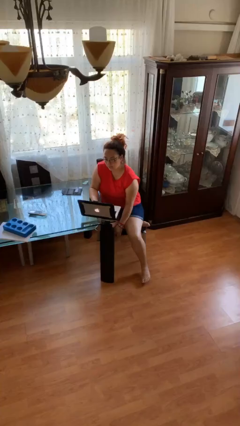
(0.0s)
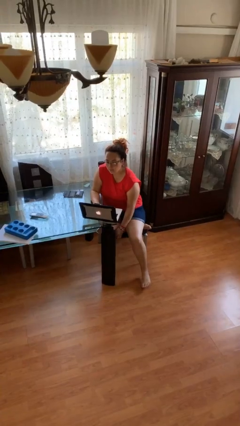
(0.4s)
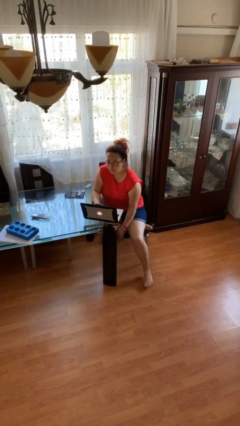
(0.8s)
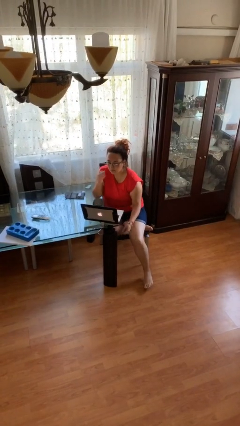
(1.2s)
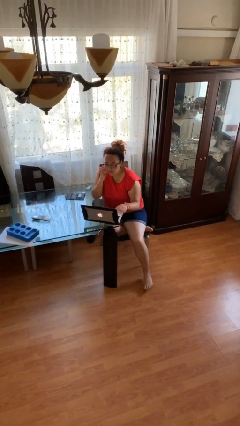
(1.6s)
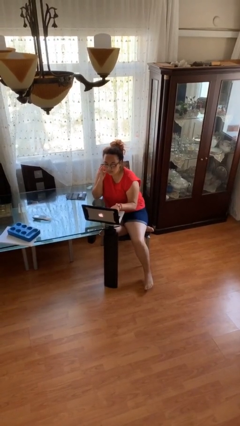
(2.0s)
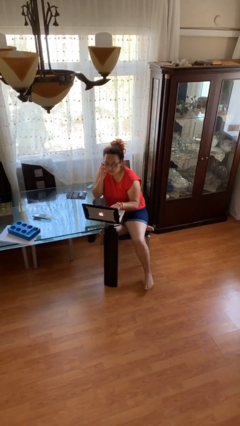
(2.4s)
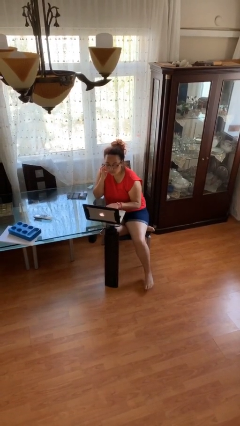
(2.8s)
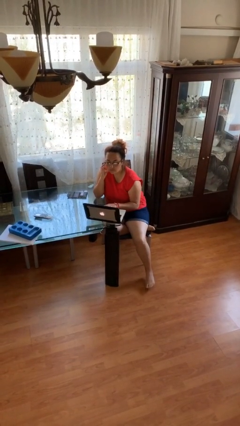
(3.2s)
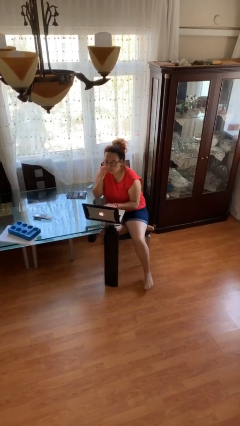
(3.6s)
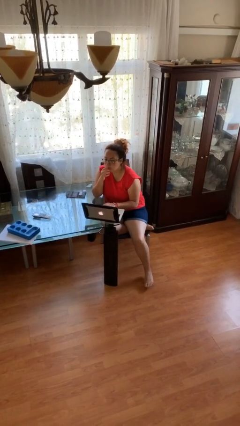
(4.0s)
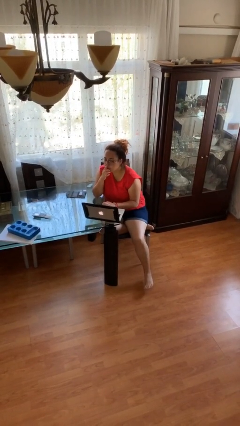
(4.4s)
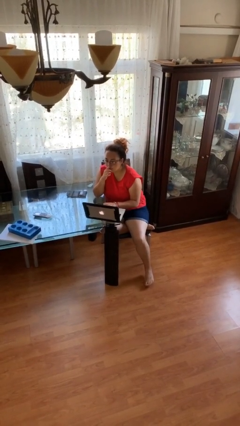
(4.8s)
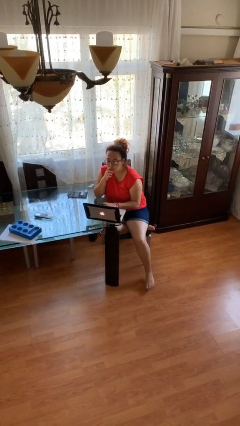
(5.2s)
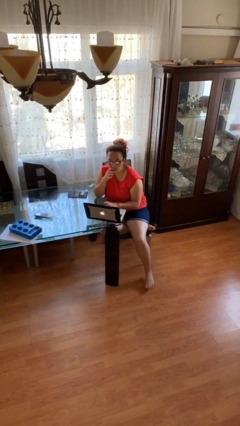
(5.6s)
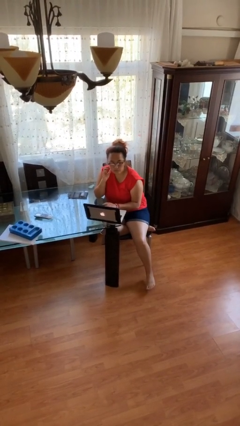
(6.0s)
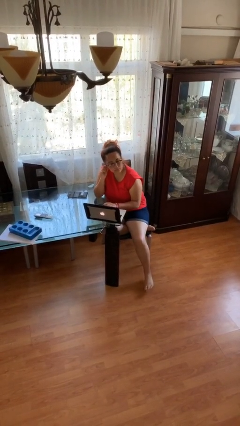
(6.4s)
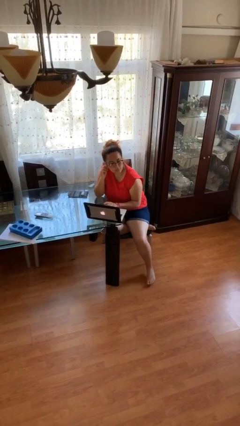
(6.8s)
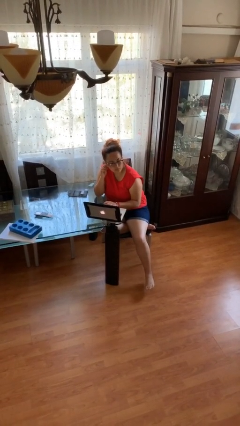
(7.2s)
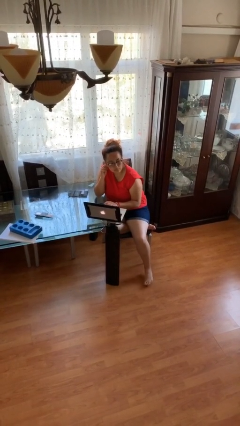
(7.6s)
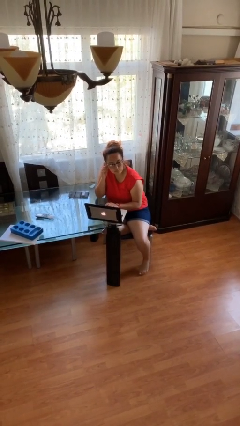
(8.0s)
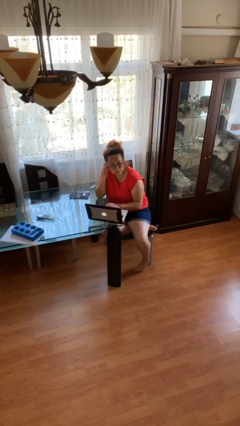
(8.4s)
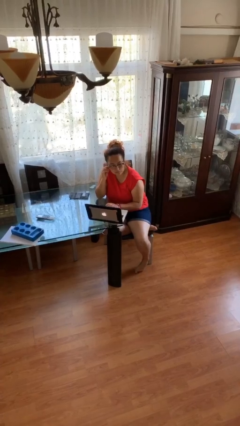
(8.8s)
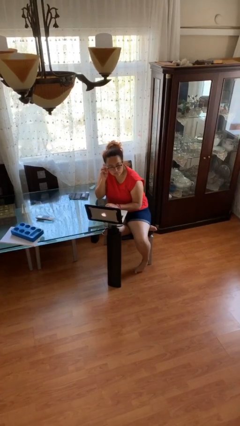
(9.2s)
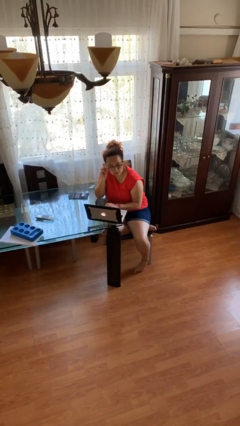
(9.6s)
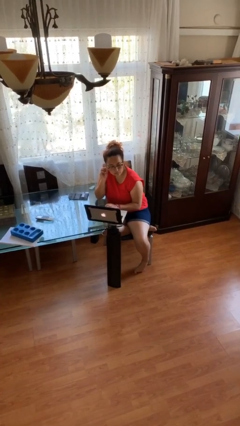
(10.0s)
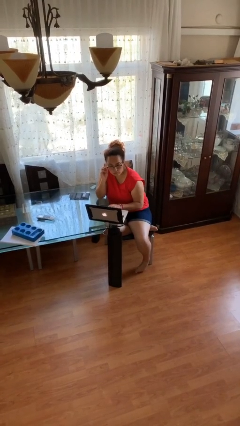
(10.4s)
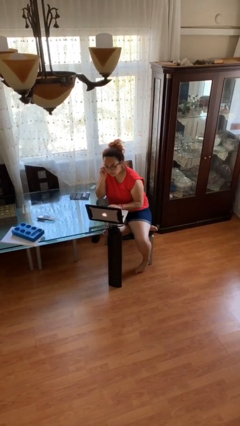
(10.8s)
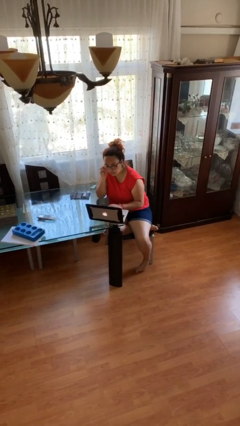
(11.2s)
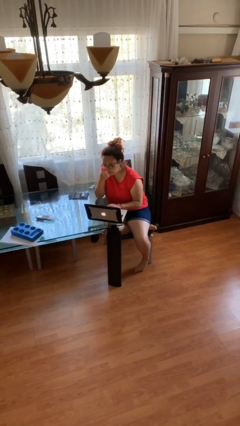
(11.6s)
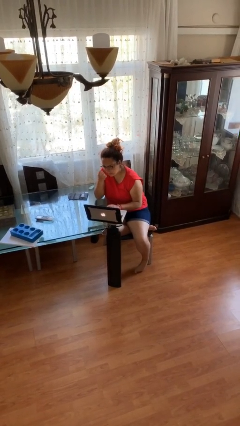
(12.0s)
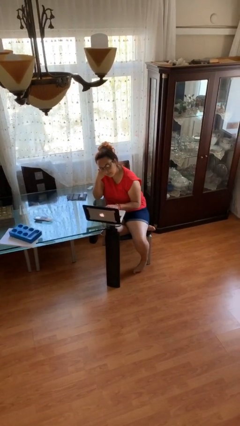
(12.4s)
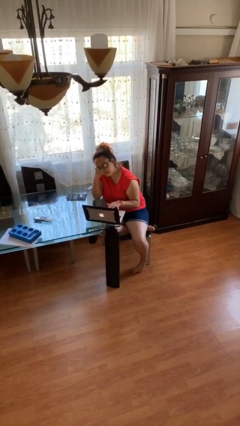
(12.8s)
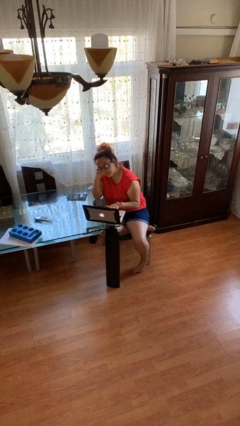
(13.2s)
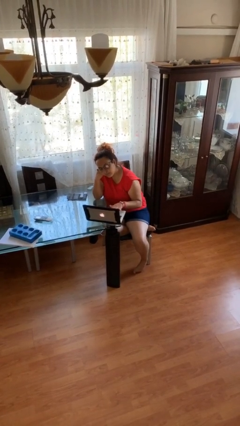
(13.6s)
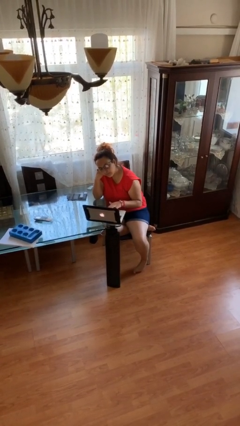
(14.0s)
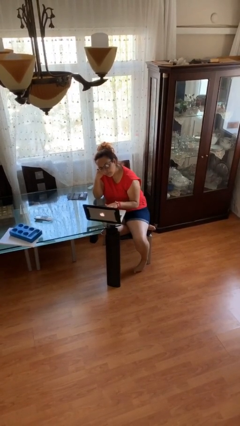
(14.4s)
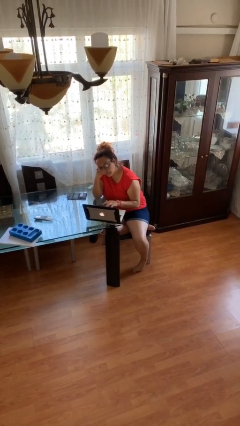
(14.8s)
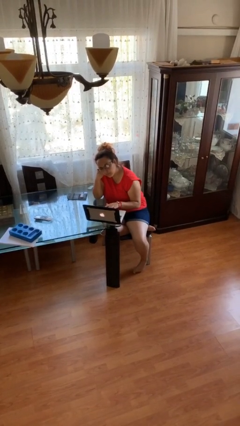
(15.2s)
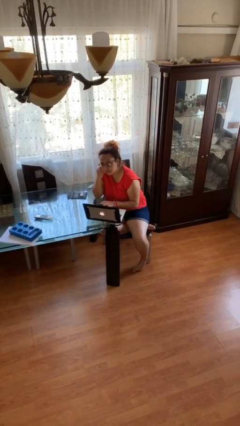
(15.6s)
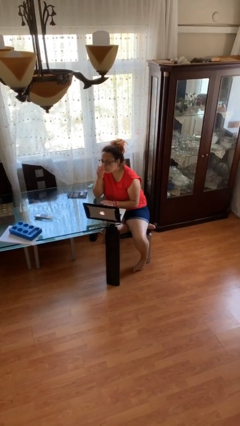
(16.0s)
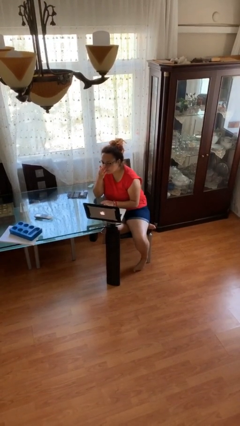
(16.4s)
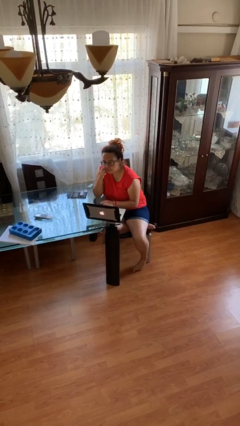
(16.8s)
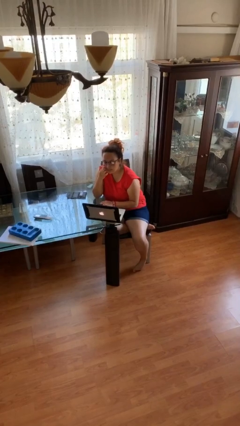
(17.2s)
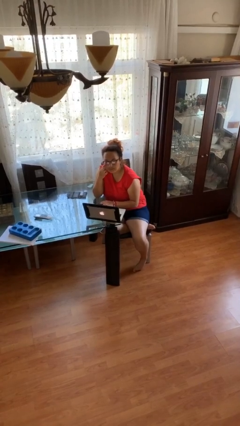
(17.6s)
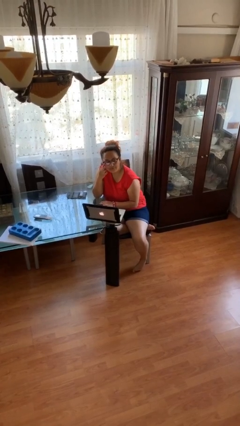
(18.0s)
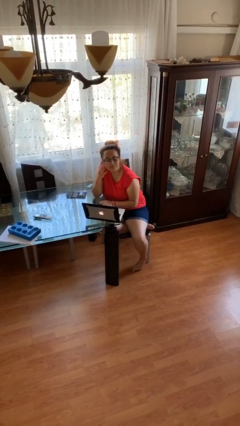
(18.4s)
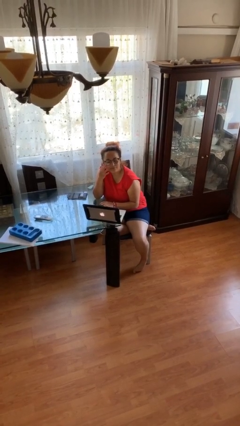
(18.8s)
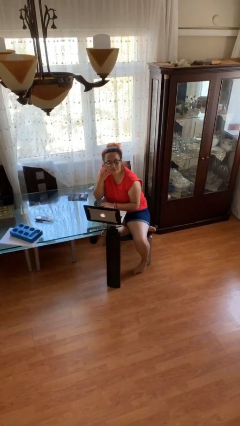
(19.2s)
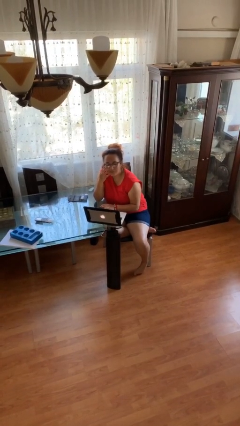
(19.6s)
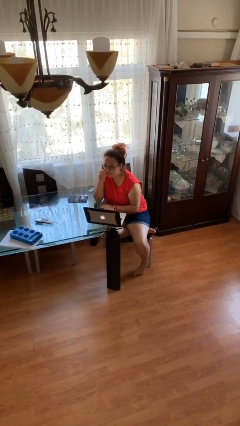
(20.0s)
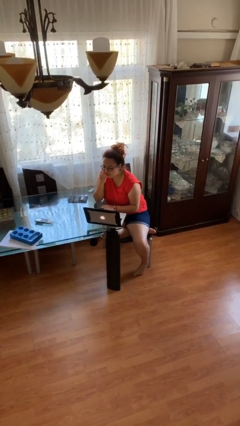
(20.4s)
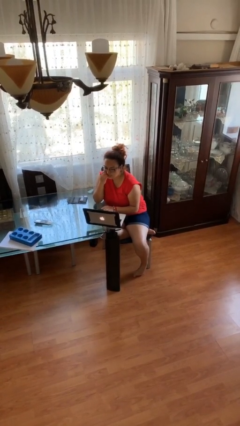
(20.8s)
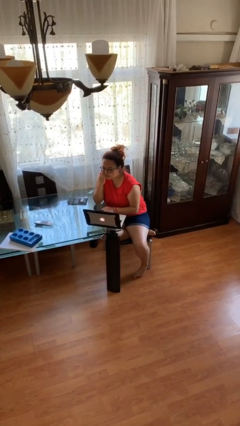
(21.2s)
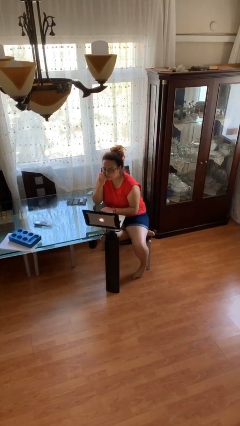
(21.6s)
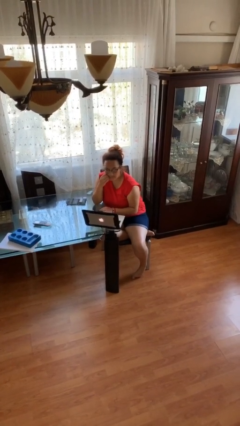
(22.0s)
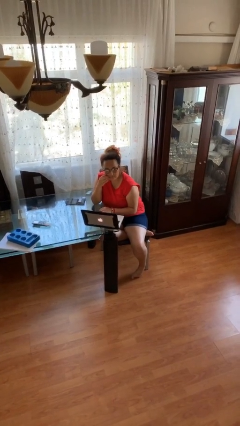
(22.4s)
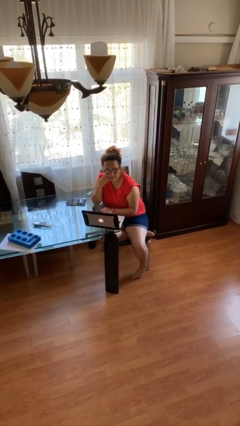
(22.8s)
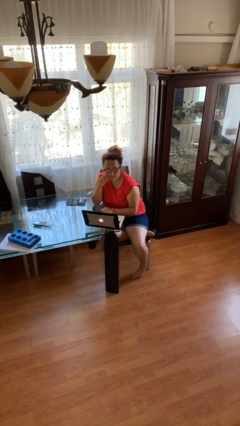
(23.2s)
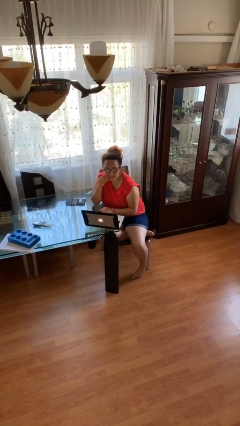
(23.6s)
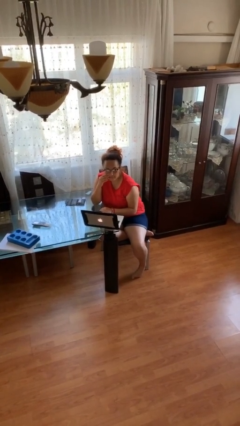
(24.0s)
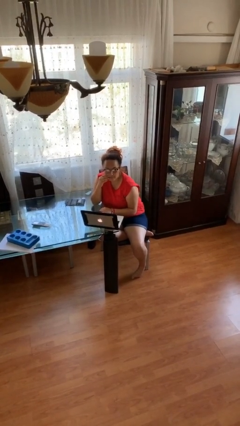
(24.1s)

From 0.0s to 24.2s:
person interacts with laptop

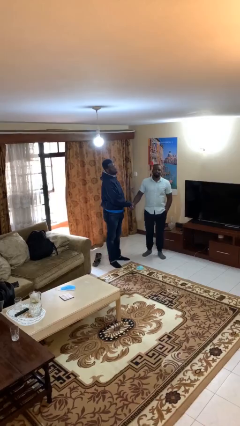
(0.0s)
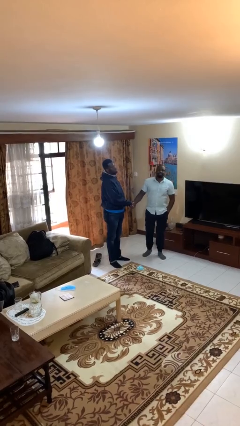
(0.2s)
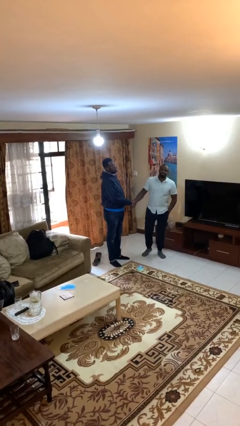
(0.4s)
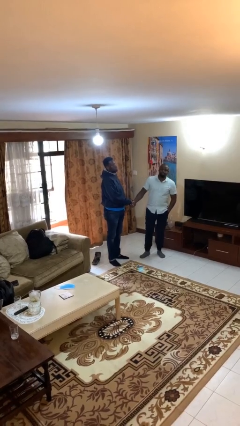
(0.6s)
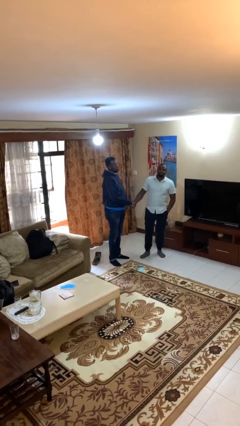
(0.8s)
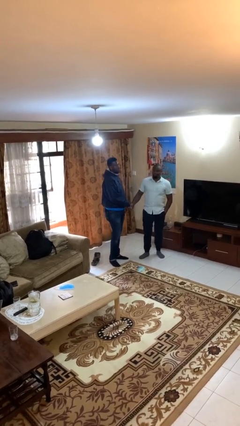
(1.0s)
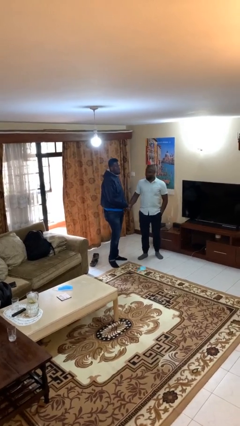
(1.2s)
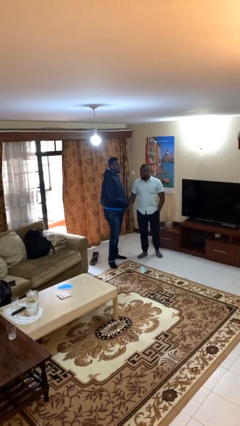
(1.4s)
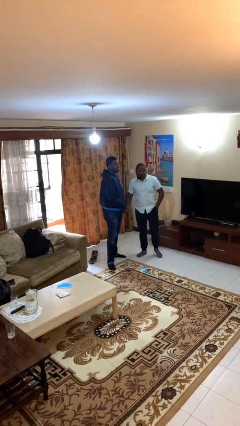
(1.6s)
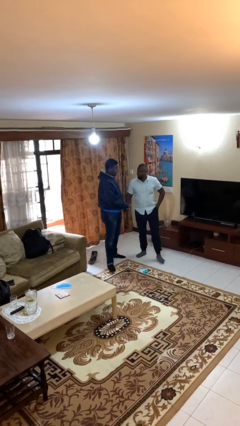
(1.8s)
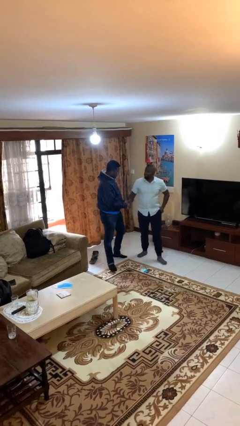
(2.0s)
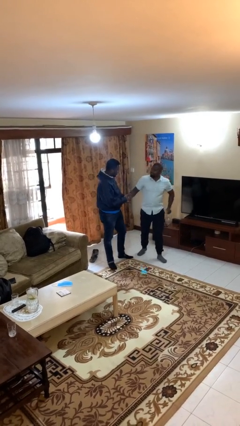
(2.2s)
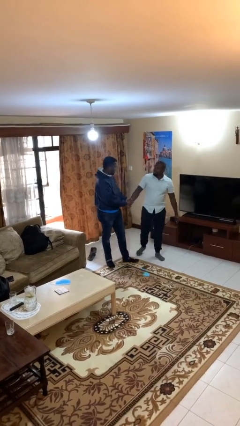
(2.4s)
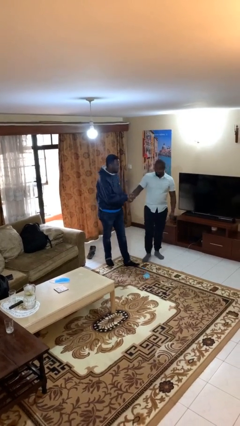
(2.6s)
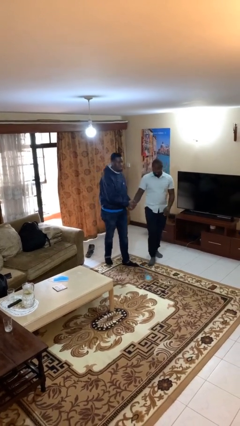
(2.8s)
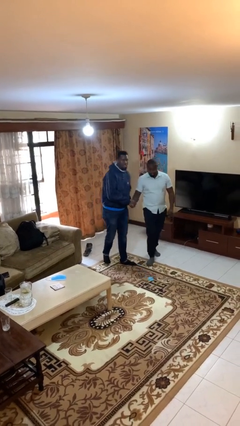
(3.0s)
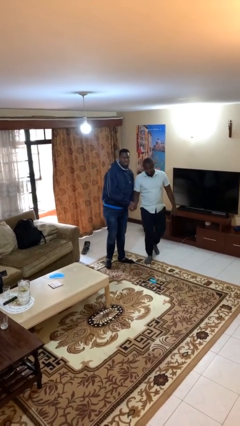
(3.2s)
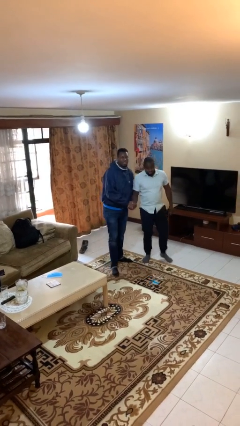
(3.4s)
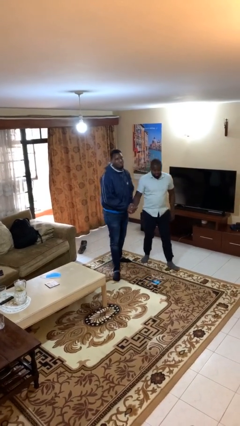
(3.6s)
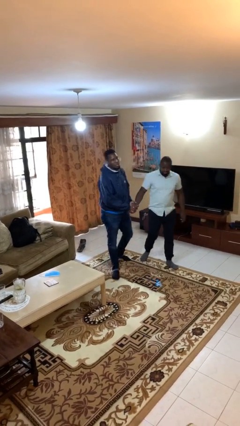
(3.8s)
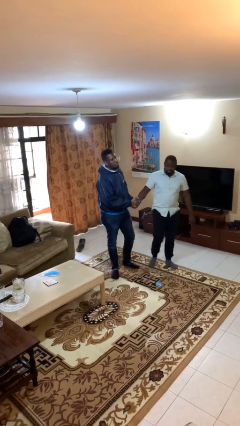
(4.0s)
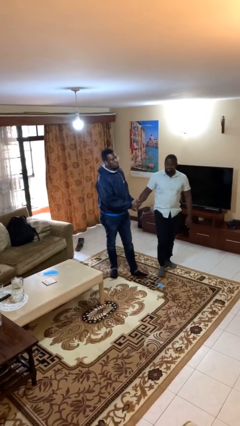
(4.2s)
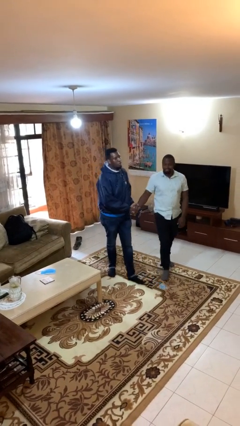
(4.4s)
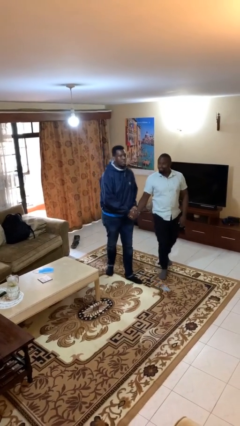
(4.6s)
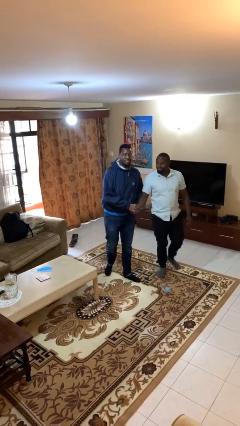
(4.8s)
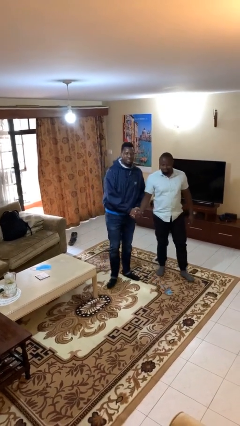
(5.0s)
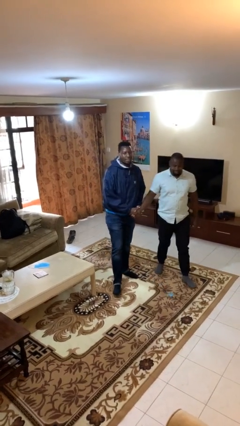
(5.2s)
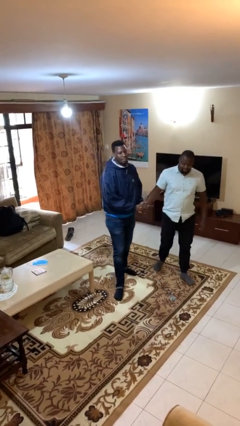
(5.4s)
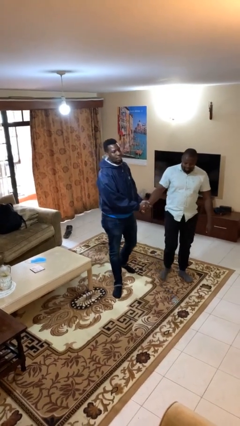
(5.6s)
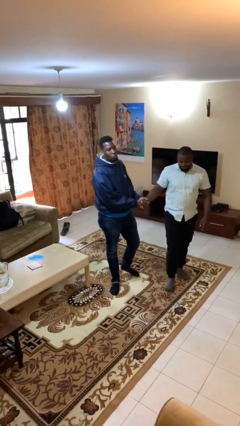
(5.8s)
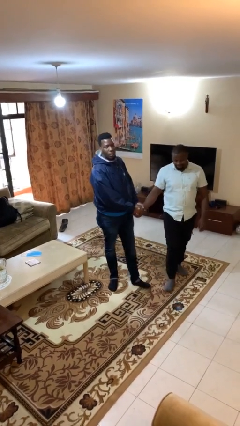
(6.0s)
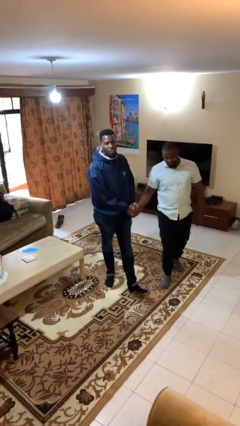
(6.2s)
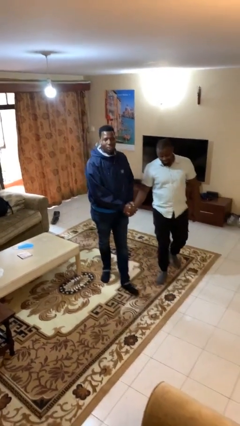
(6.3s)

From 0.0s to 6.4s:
person holds hand
